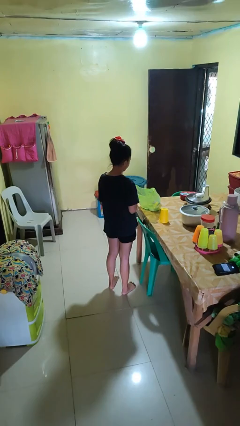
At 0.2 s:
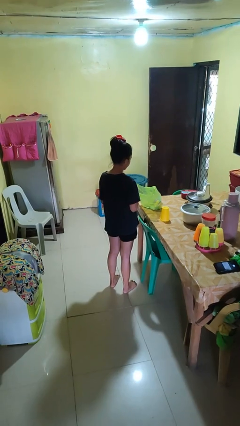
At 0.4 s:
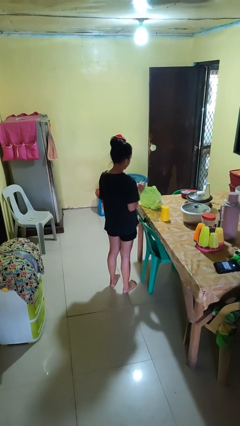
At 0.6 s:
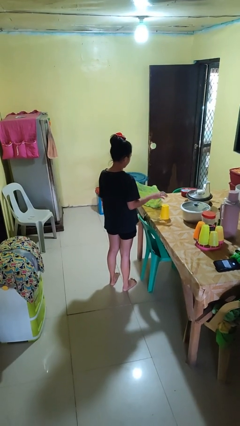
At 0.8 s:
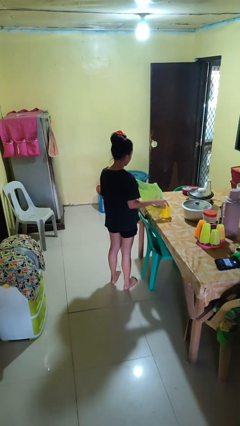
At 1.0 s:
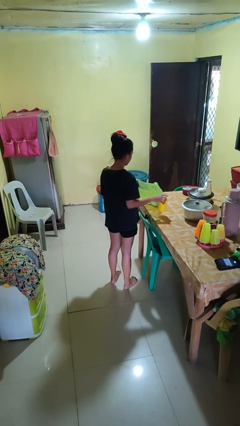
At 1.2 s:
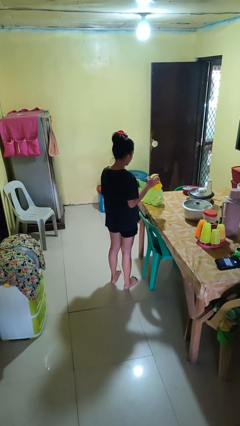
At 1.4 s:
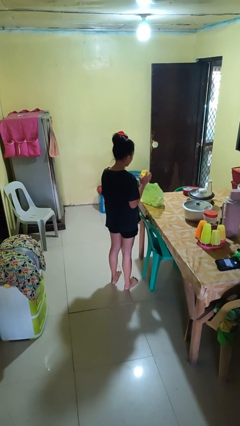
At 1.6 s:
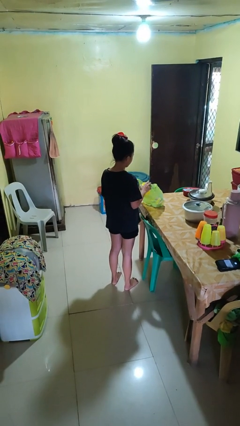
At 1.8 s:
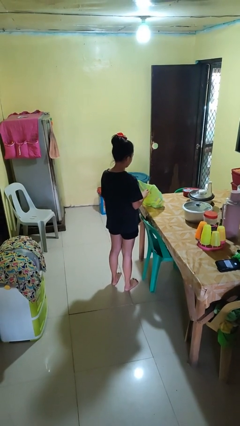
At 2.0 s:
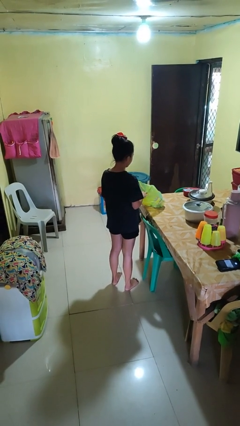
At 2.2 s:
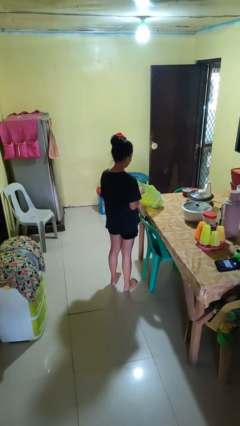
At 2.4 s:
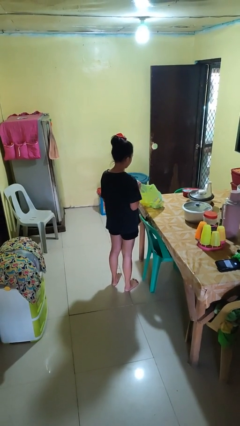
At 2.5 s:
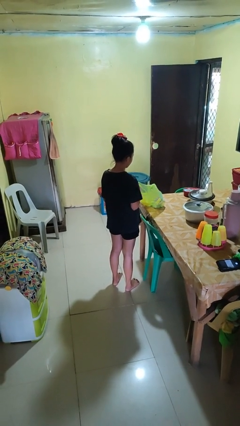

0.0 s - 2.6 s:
person puts object into bag

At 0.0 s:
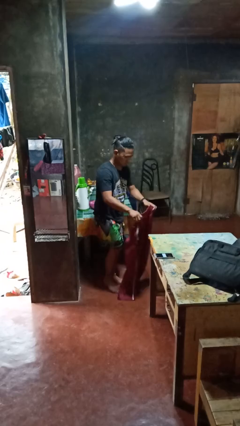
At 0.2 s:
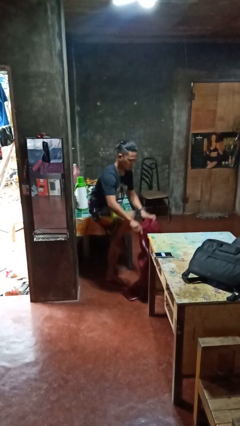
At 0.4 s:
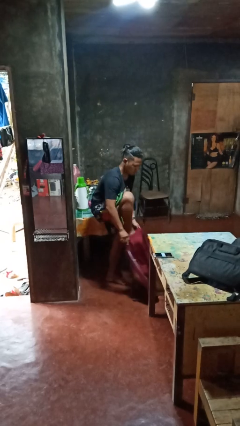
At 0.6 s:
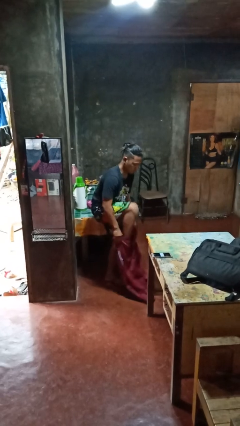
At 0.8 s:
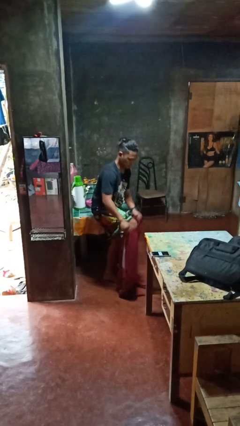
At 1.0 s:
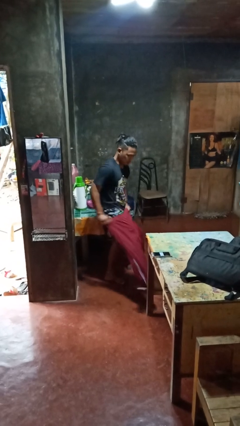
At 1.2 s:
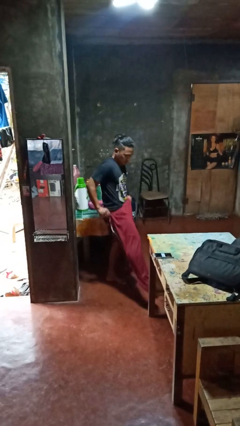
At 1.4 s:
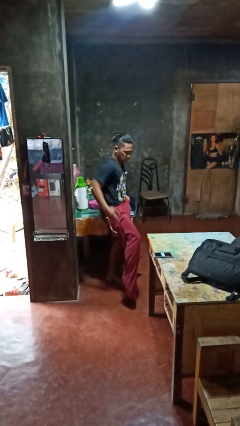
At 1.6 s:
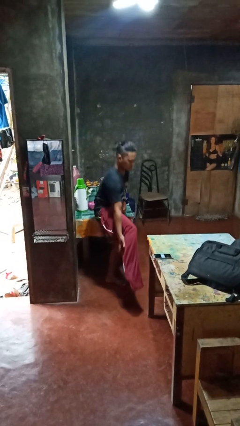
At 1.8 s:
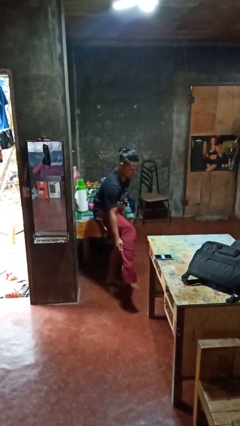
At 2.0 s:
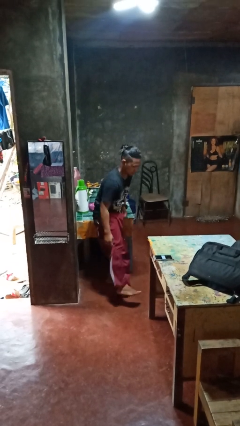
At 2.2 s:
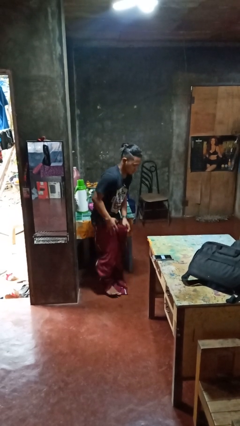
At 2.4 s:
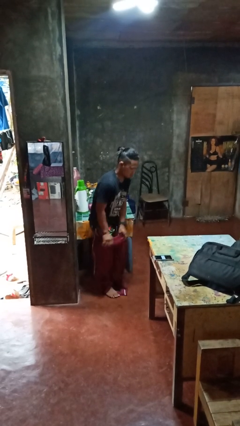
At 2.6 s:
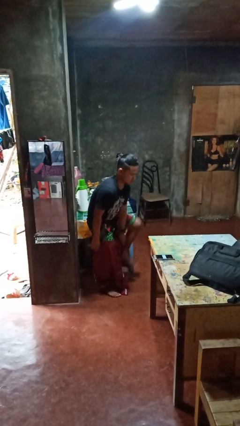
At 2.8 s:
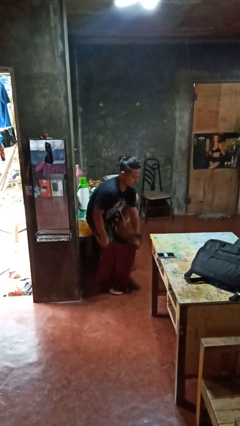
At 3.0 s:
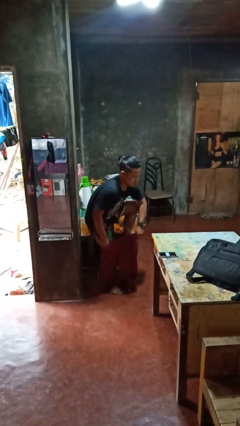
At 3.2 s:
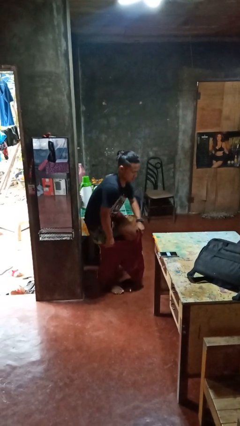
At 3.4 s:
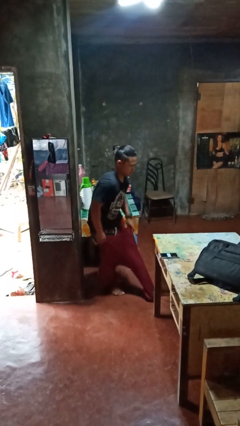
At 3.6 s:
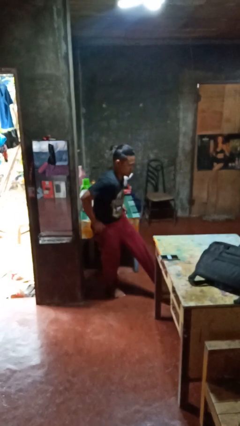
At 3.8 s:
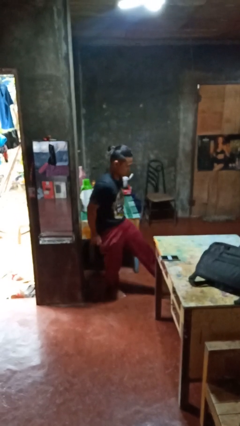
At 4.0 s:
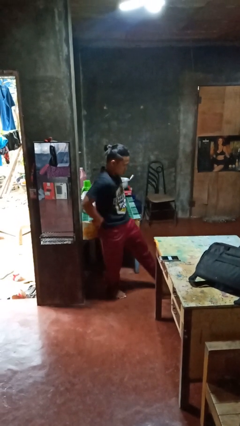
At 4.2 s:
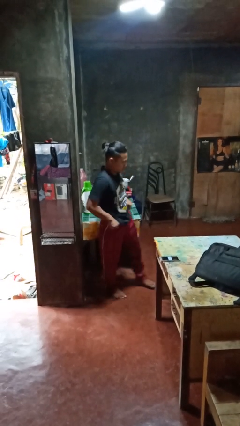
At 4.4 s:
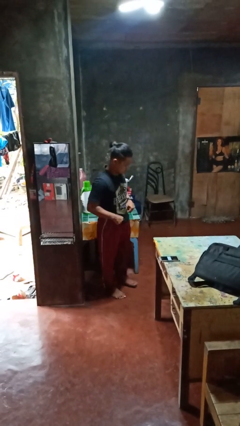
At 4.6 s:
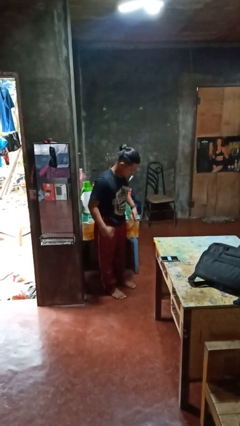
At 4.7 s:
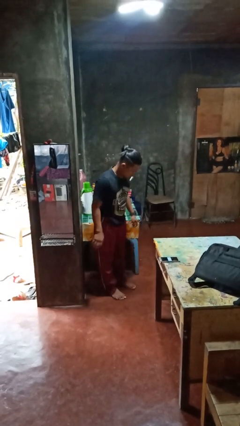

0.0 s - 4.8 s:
person puts on pants

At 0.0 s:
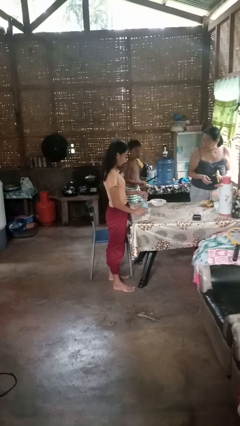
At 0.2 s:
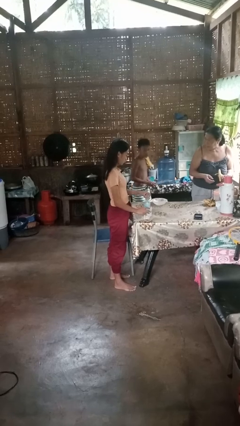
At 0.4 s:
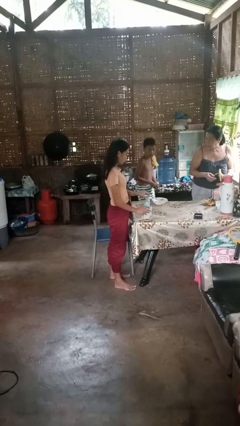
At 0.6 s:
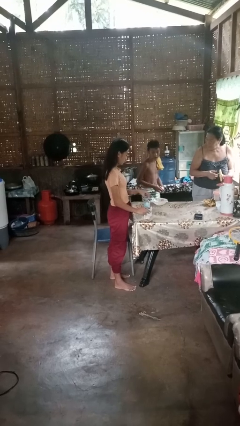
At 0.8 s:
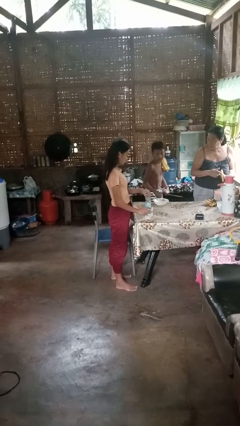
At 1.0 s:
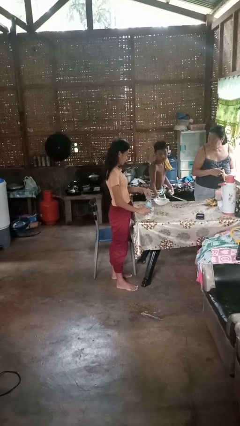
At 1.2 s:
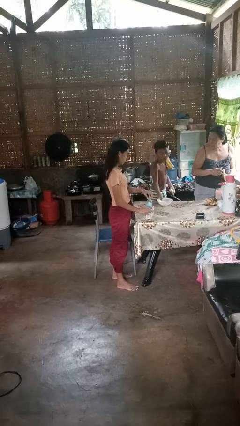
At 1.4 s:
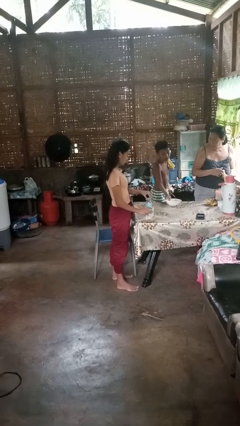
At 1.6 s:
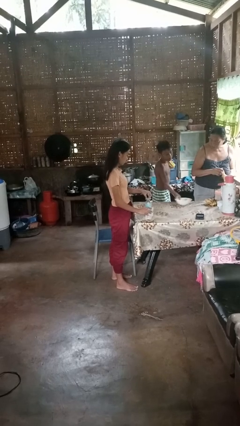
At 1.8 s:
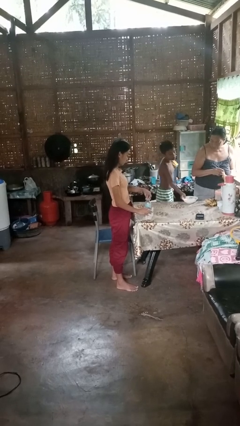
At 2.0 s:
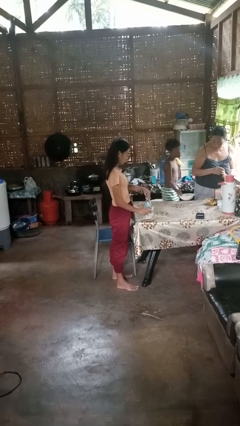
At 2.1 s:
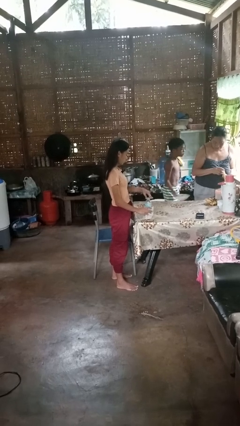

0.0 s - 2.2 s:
person screws lid to bottle

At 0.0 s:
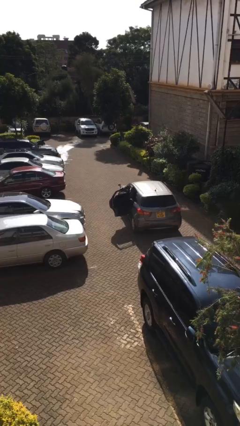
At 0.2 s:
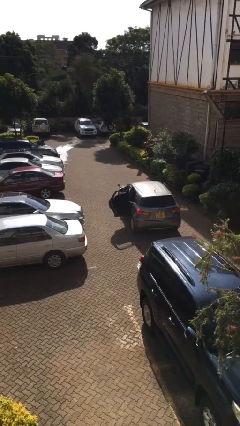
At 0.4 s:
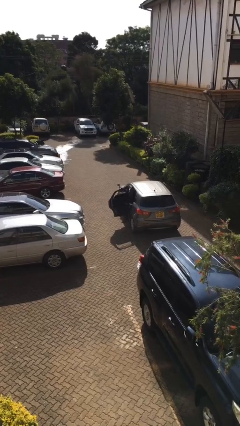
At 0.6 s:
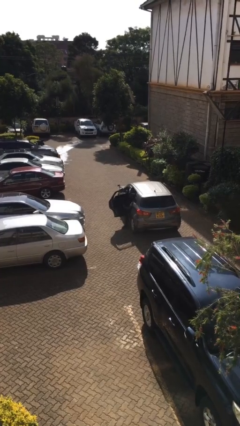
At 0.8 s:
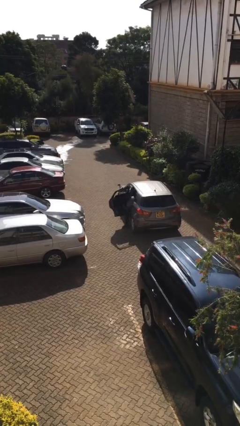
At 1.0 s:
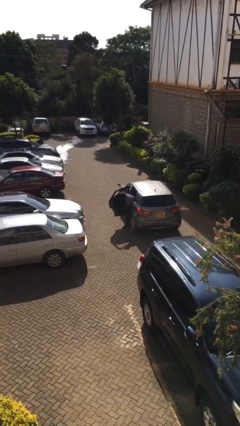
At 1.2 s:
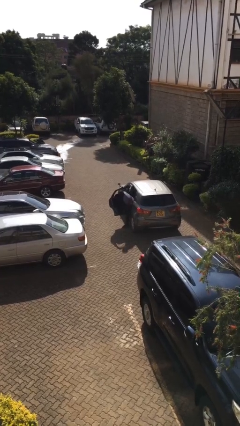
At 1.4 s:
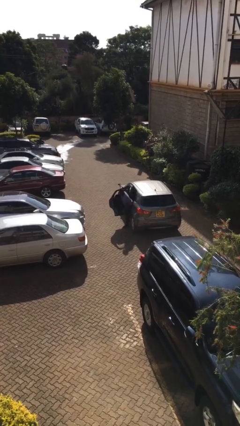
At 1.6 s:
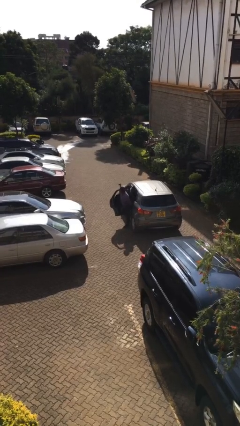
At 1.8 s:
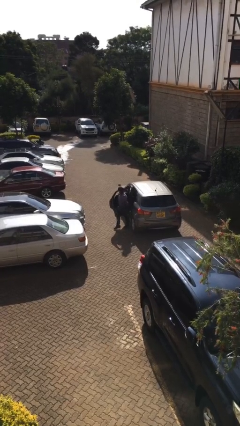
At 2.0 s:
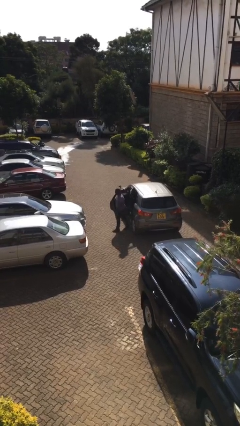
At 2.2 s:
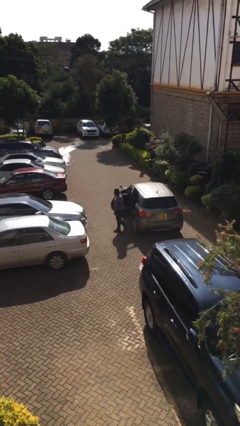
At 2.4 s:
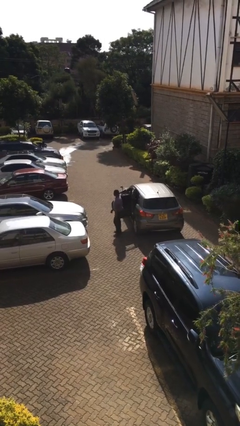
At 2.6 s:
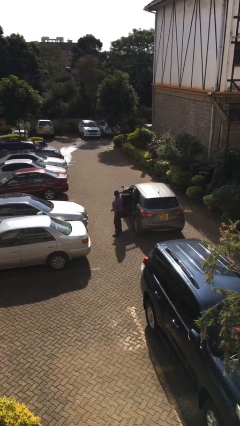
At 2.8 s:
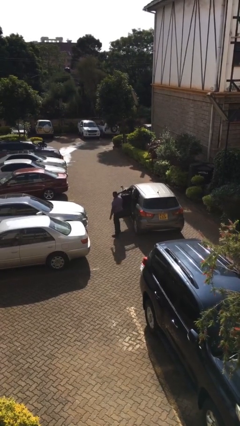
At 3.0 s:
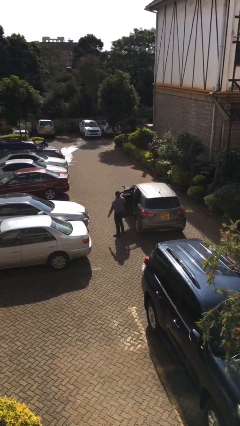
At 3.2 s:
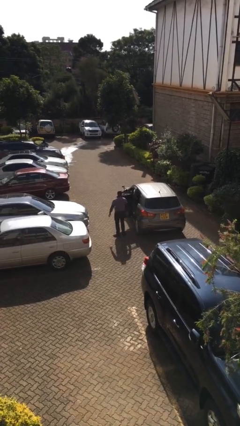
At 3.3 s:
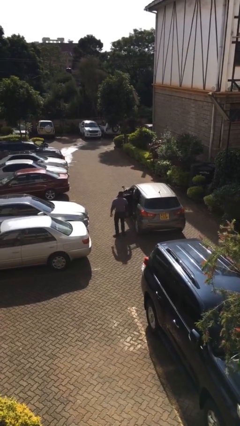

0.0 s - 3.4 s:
person exits car

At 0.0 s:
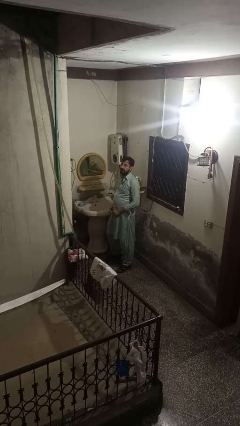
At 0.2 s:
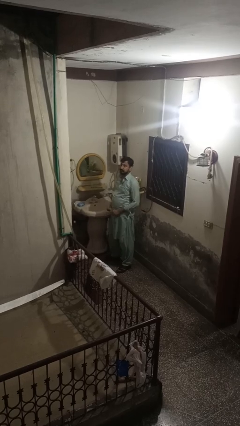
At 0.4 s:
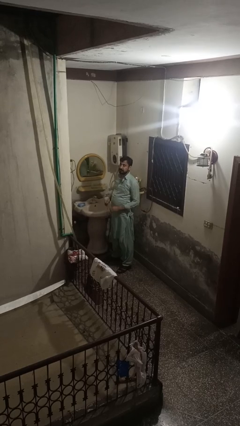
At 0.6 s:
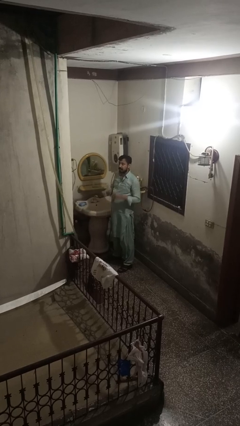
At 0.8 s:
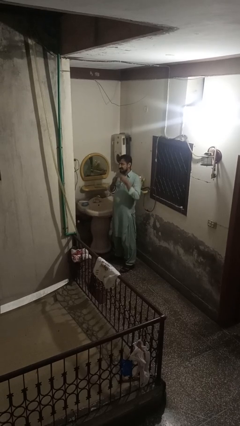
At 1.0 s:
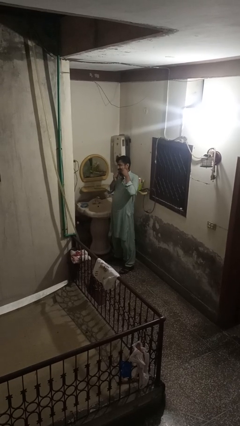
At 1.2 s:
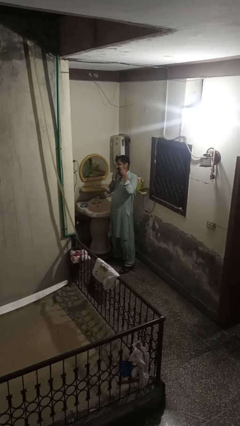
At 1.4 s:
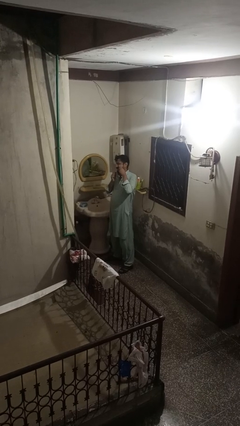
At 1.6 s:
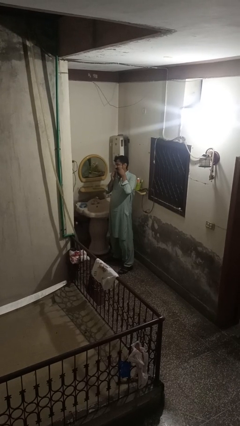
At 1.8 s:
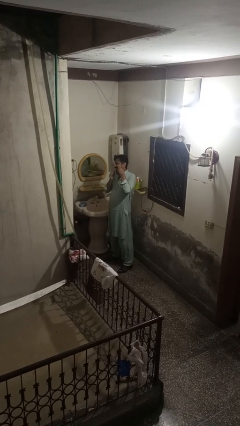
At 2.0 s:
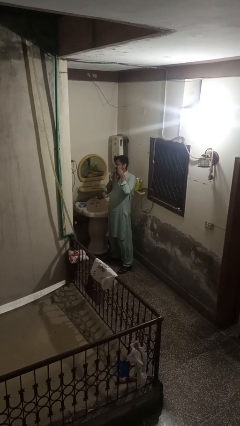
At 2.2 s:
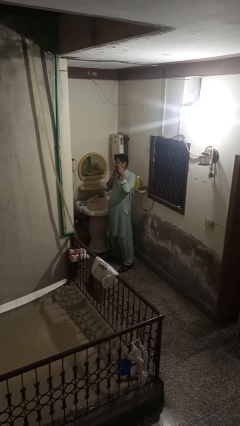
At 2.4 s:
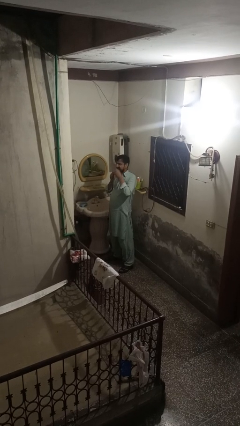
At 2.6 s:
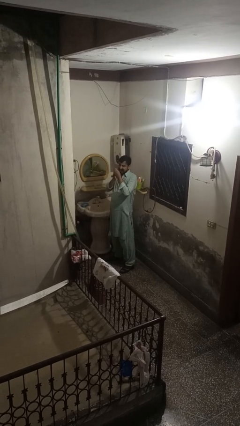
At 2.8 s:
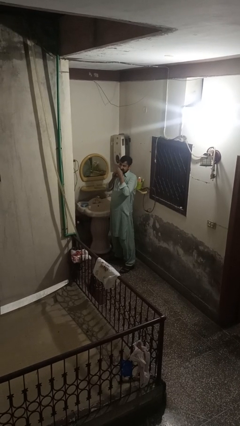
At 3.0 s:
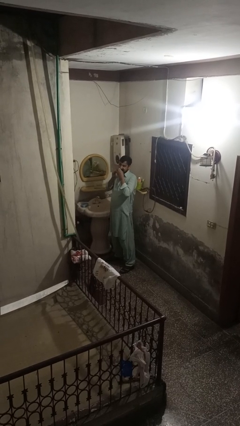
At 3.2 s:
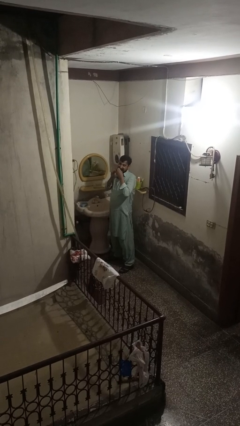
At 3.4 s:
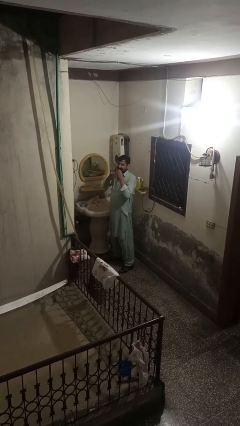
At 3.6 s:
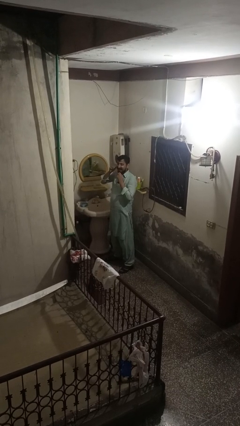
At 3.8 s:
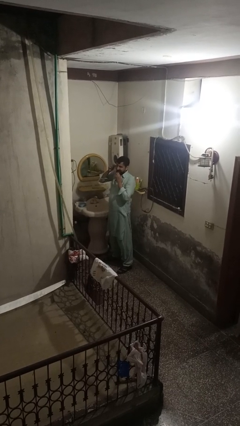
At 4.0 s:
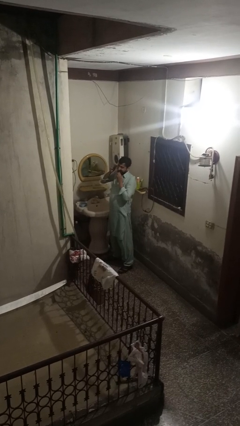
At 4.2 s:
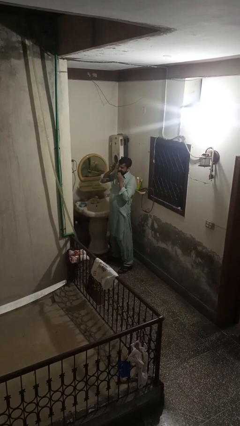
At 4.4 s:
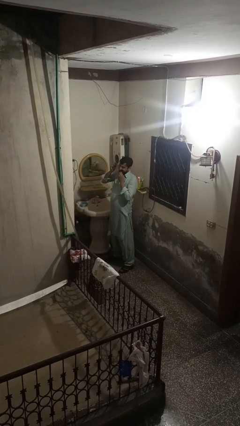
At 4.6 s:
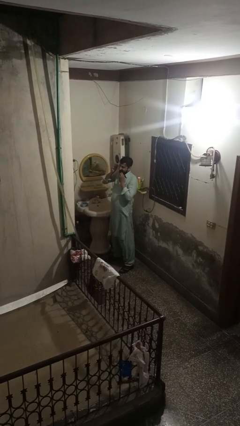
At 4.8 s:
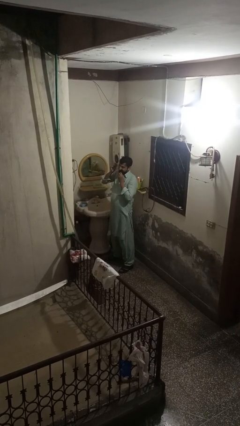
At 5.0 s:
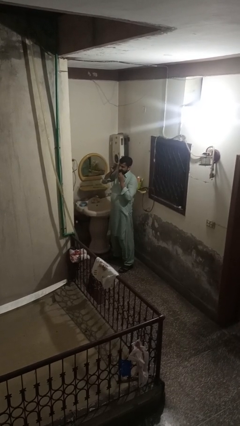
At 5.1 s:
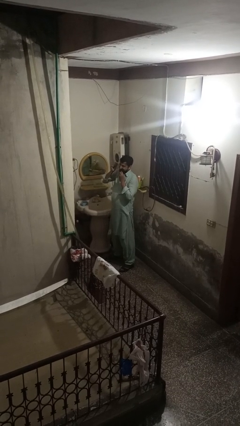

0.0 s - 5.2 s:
person flosses
